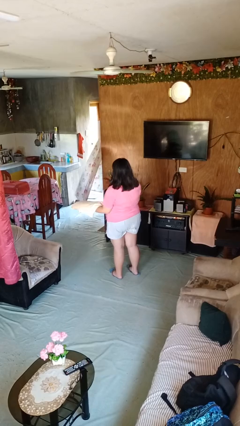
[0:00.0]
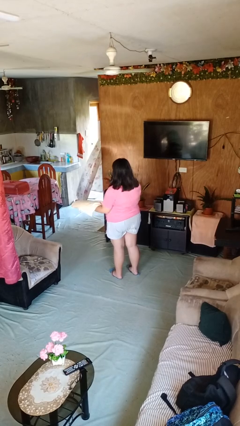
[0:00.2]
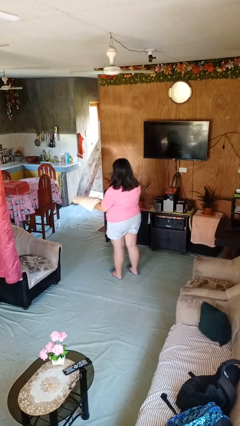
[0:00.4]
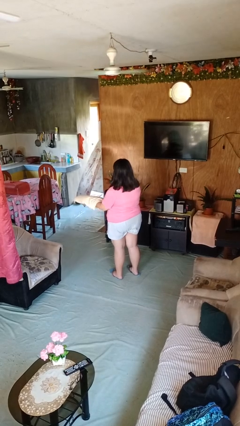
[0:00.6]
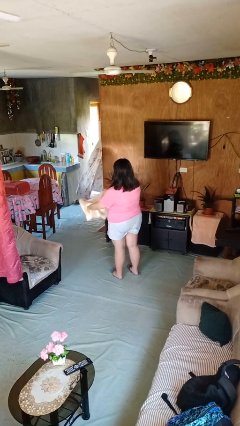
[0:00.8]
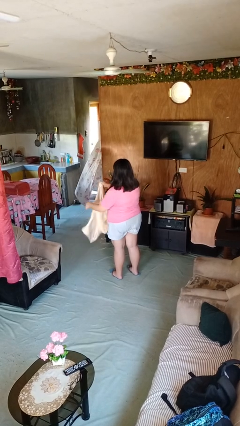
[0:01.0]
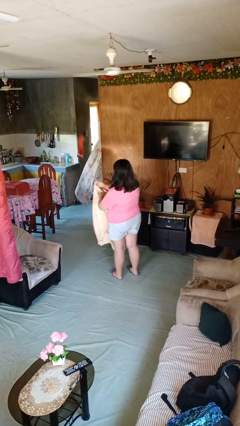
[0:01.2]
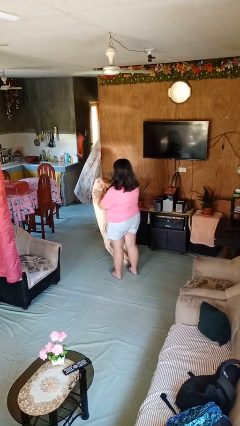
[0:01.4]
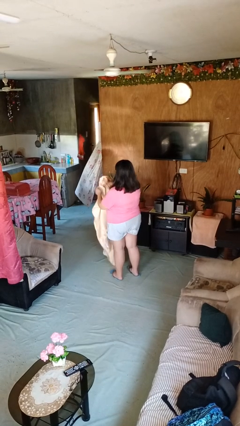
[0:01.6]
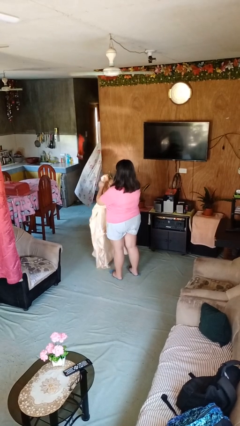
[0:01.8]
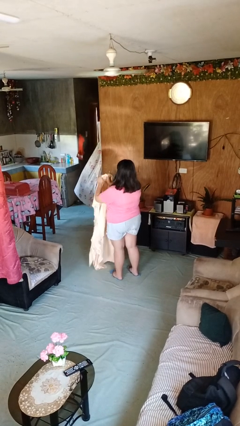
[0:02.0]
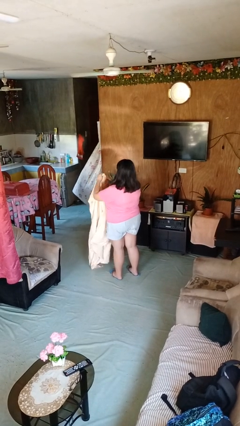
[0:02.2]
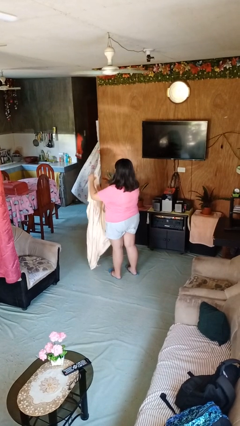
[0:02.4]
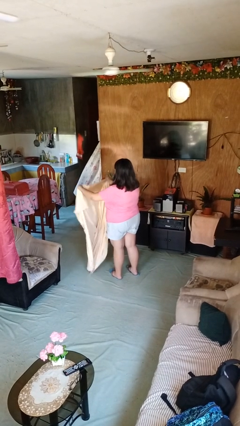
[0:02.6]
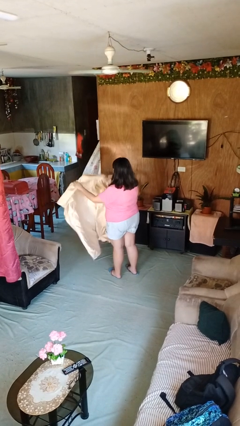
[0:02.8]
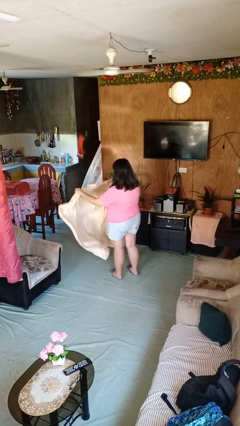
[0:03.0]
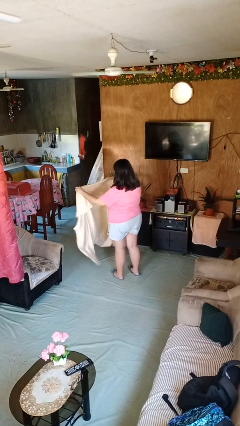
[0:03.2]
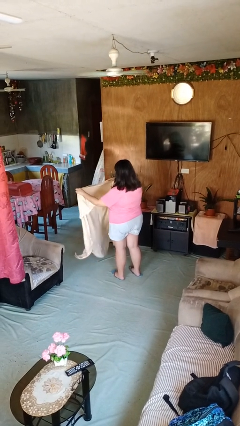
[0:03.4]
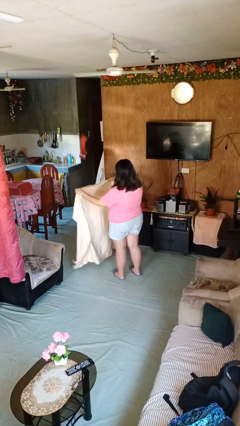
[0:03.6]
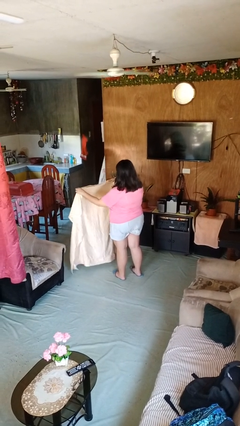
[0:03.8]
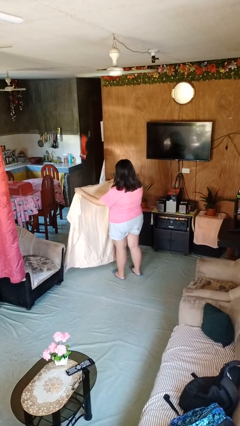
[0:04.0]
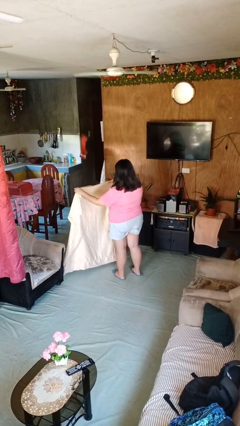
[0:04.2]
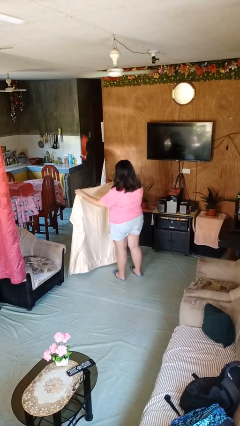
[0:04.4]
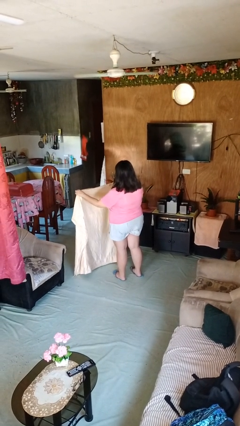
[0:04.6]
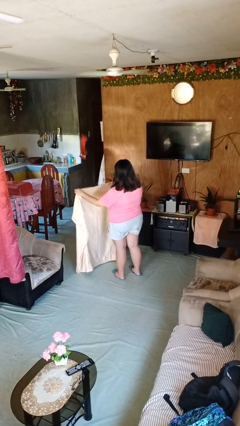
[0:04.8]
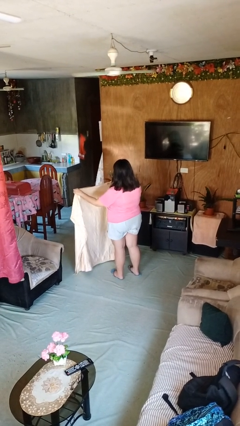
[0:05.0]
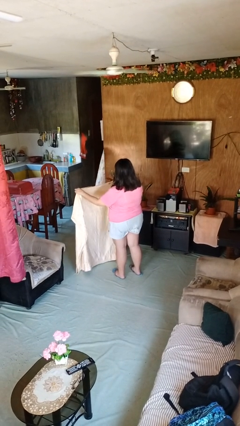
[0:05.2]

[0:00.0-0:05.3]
person unfolds blanket

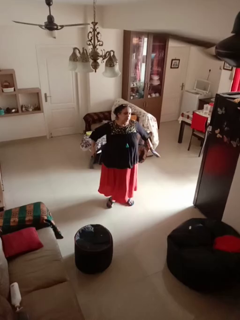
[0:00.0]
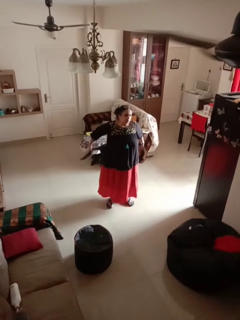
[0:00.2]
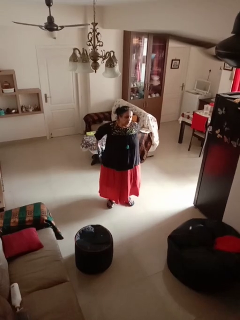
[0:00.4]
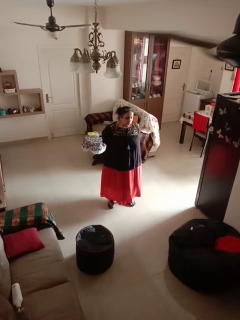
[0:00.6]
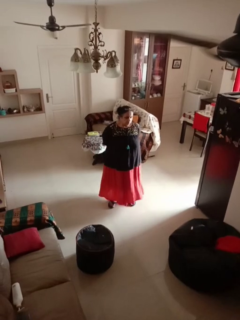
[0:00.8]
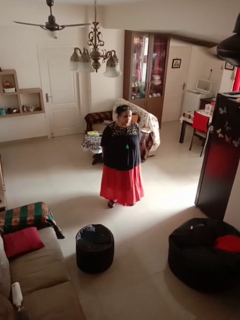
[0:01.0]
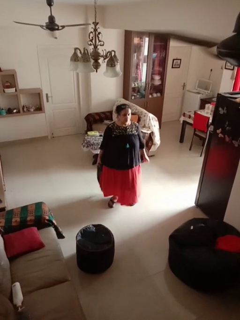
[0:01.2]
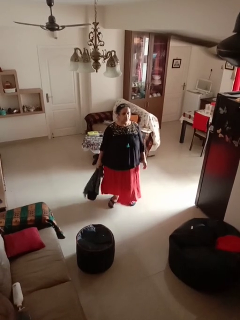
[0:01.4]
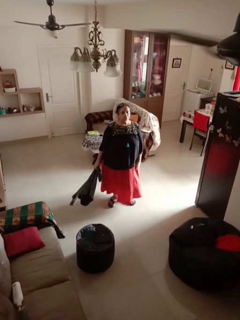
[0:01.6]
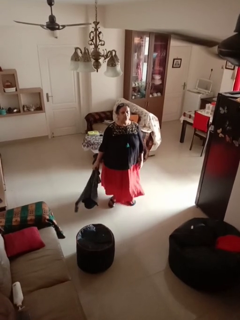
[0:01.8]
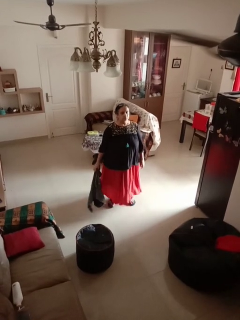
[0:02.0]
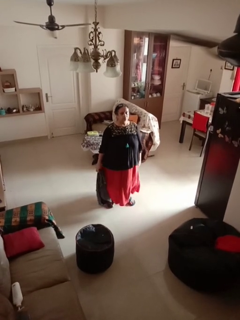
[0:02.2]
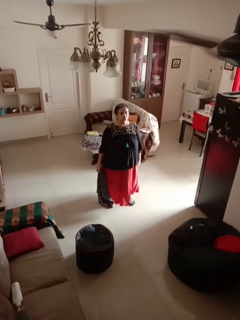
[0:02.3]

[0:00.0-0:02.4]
person unties jacket around waist

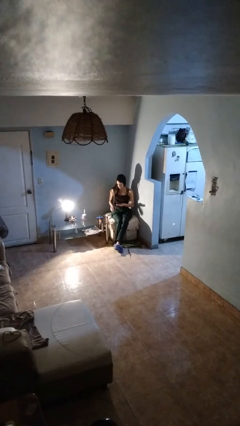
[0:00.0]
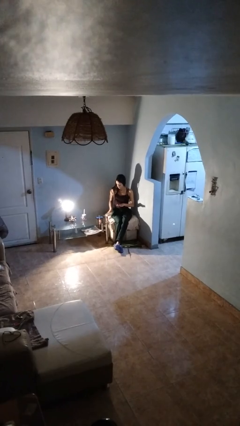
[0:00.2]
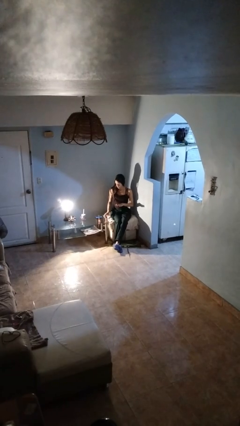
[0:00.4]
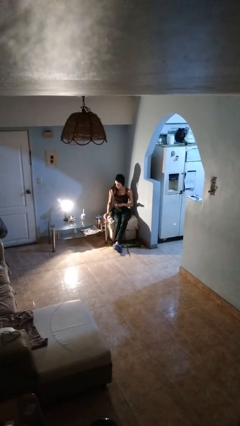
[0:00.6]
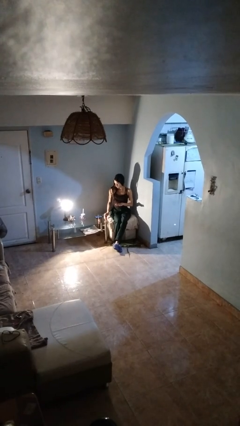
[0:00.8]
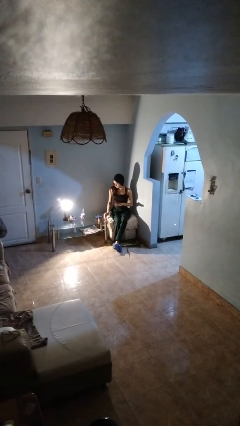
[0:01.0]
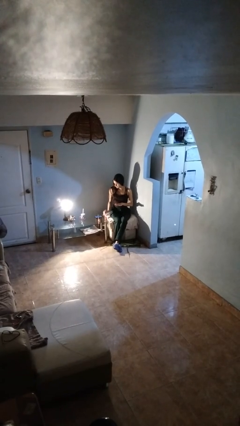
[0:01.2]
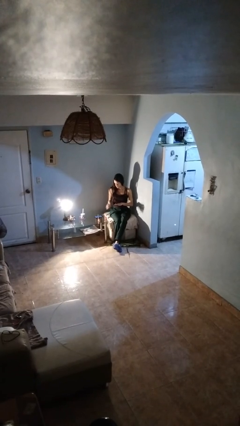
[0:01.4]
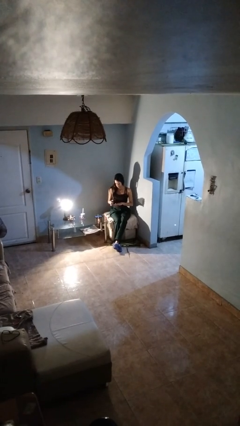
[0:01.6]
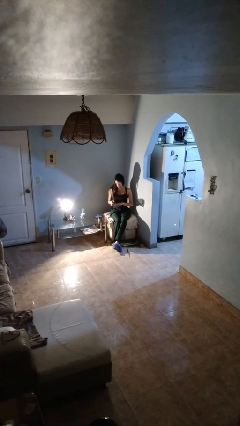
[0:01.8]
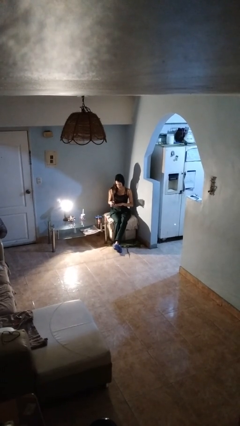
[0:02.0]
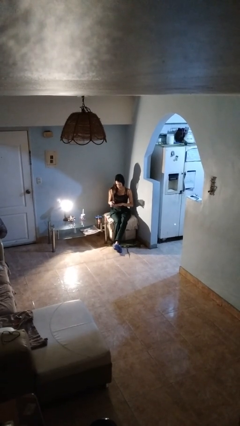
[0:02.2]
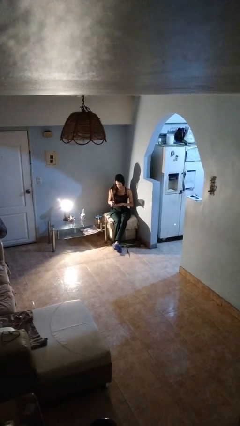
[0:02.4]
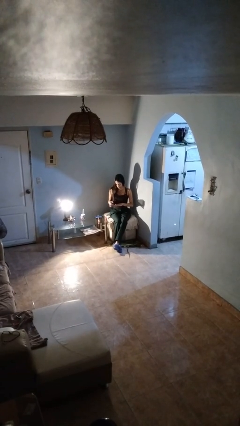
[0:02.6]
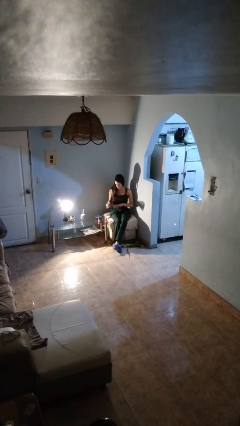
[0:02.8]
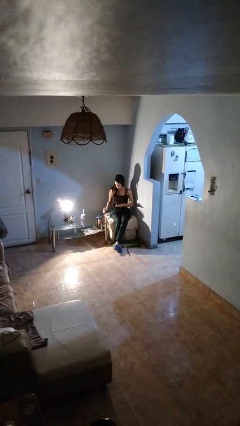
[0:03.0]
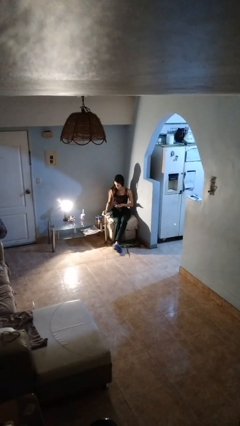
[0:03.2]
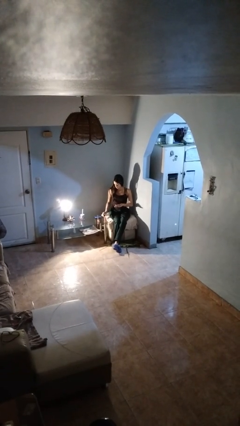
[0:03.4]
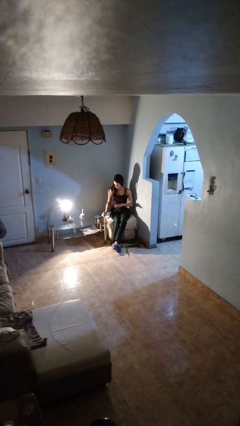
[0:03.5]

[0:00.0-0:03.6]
person paints fingernails

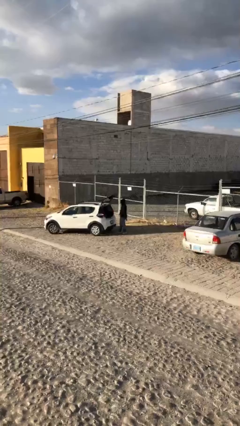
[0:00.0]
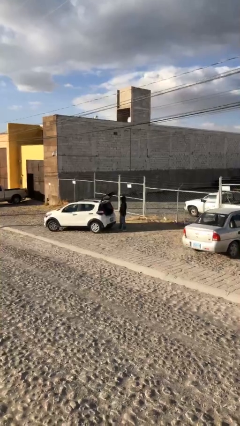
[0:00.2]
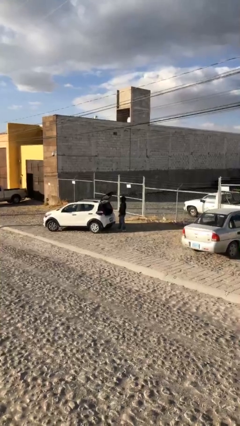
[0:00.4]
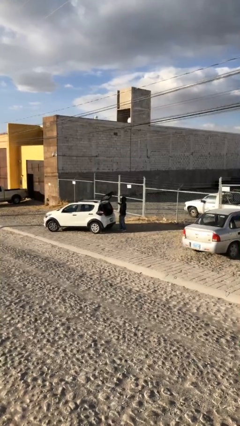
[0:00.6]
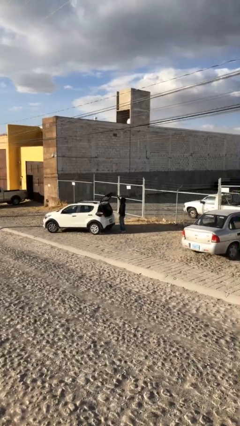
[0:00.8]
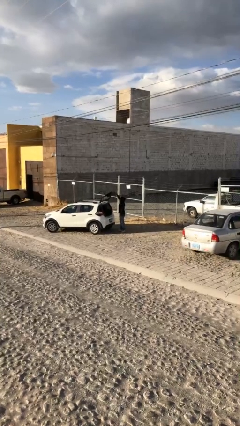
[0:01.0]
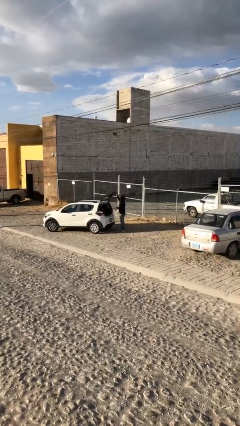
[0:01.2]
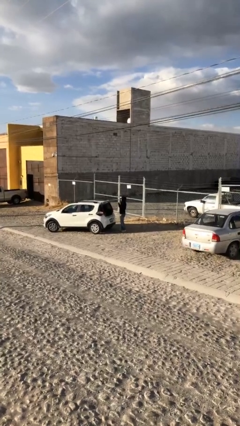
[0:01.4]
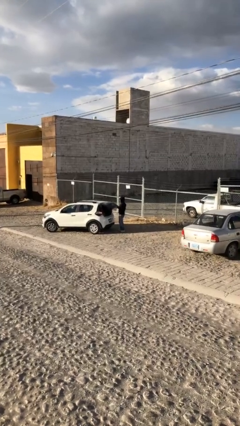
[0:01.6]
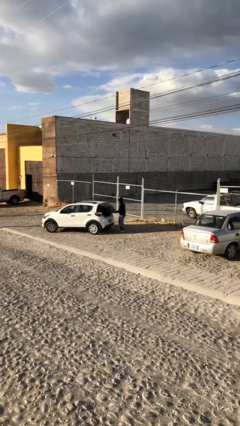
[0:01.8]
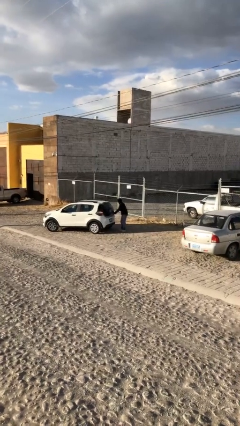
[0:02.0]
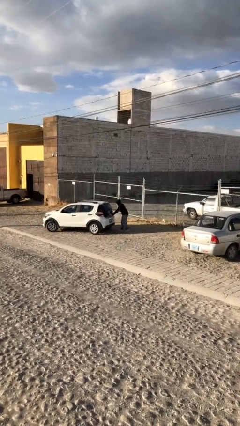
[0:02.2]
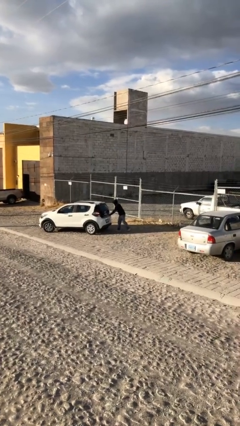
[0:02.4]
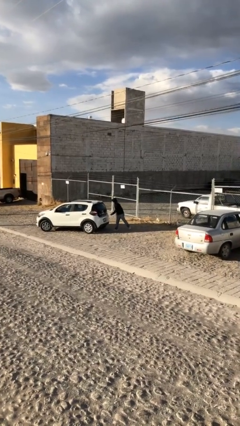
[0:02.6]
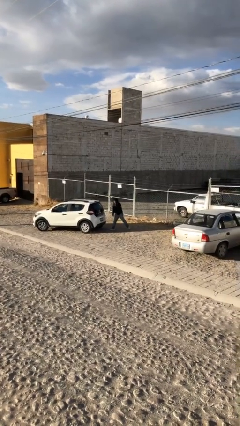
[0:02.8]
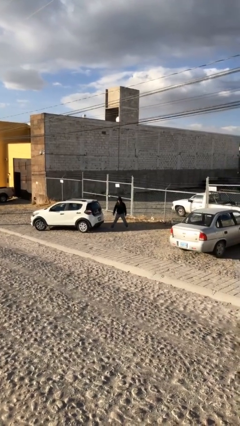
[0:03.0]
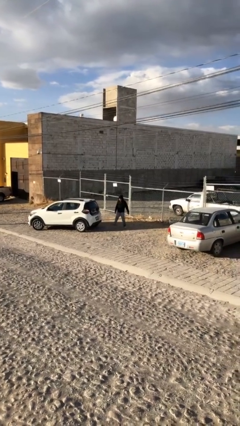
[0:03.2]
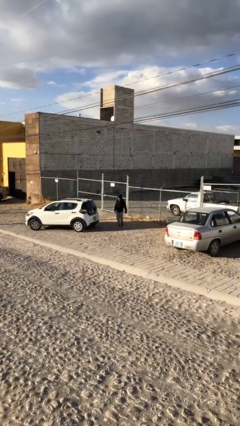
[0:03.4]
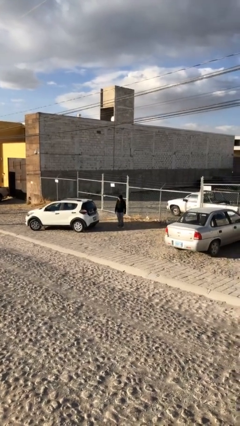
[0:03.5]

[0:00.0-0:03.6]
person closes car trunk

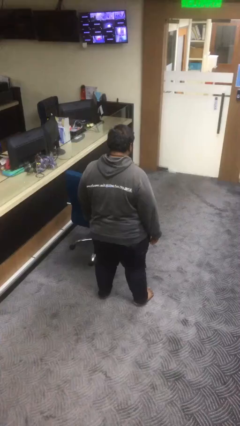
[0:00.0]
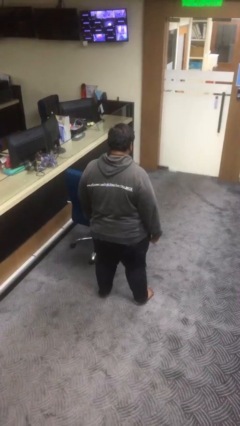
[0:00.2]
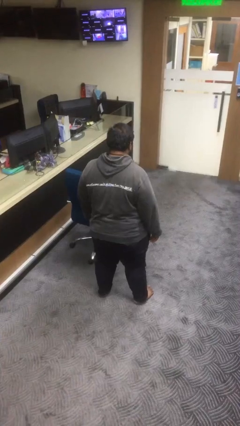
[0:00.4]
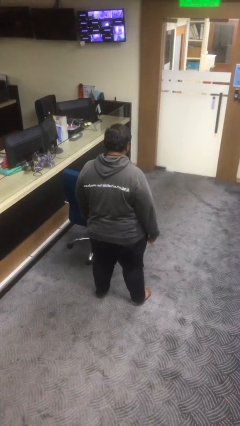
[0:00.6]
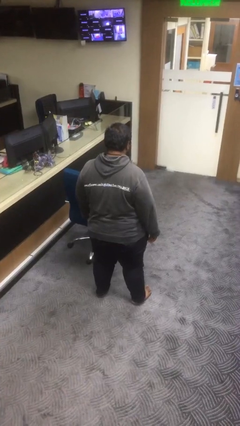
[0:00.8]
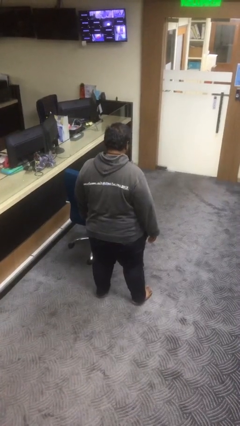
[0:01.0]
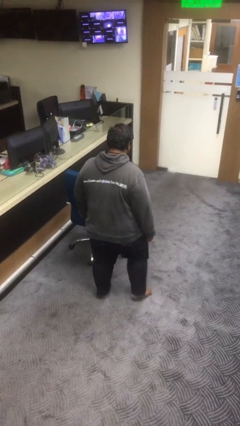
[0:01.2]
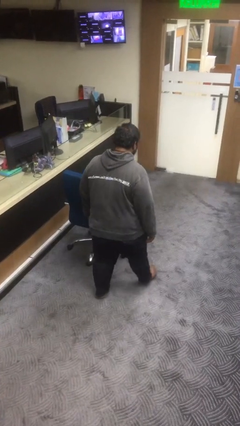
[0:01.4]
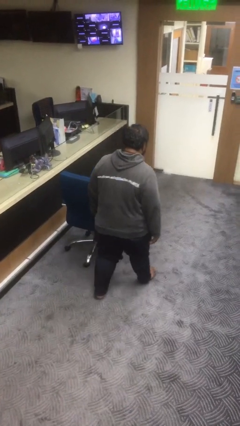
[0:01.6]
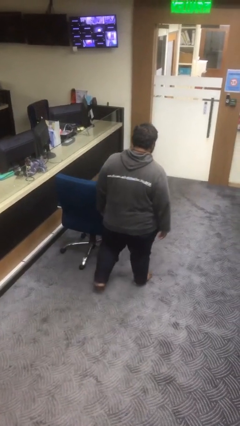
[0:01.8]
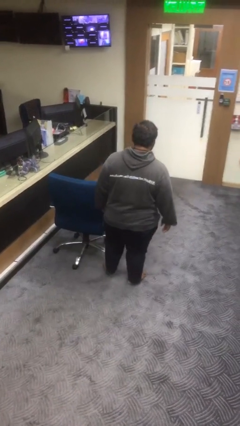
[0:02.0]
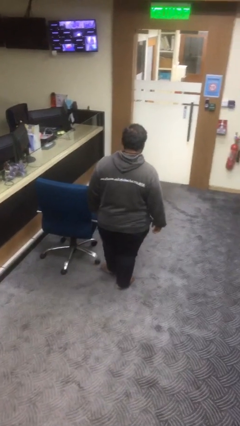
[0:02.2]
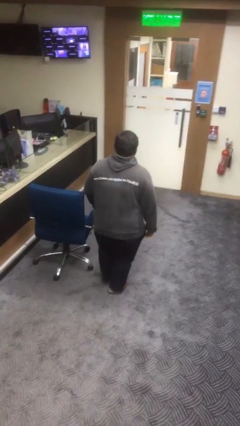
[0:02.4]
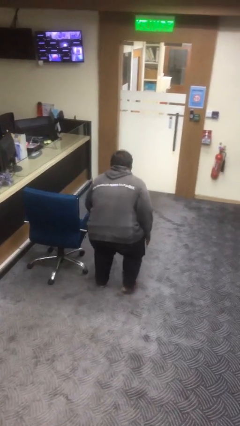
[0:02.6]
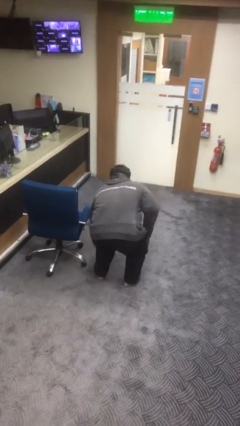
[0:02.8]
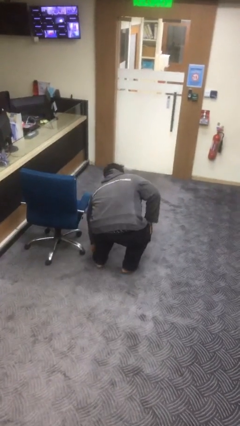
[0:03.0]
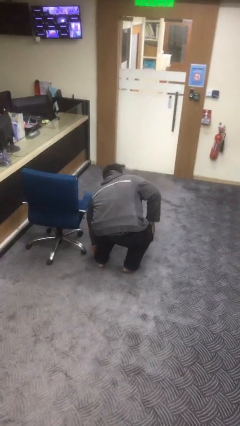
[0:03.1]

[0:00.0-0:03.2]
person stubs toe

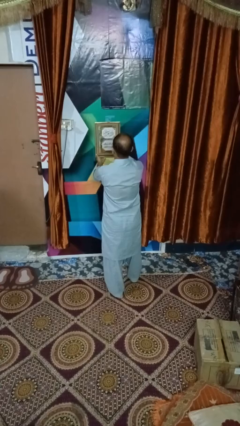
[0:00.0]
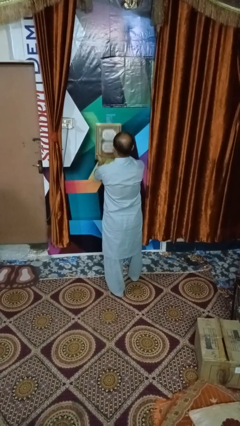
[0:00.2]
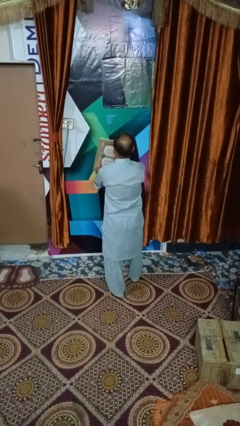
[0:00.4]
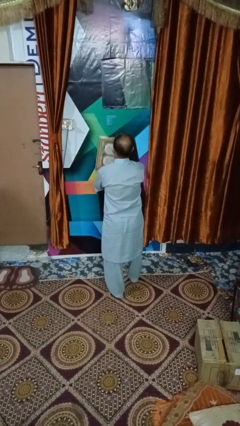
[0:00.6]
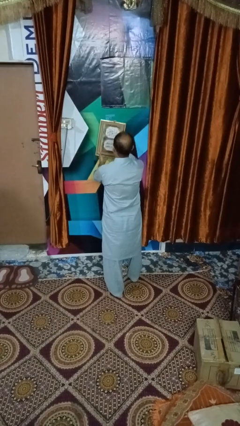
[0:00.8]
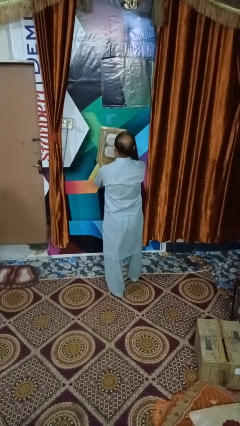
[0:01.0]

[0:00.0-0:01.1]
person takes down picture frame
